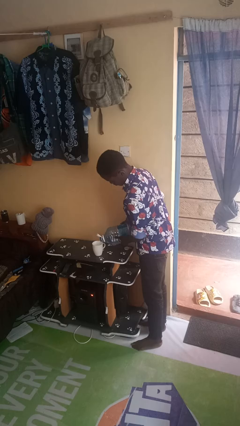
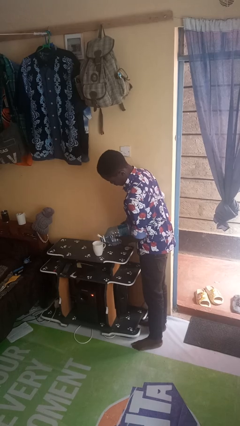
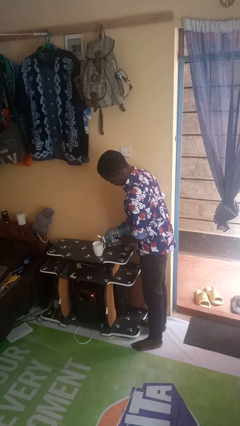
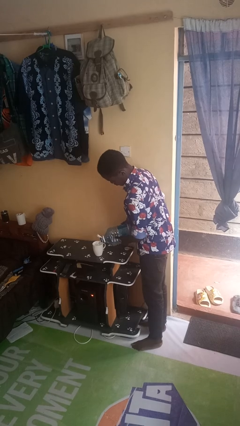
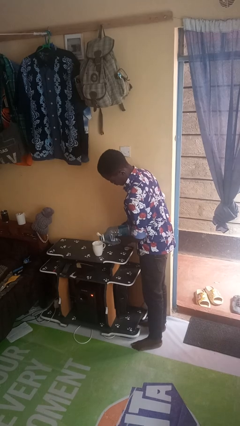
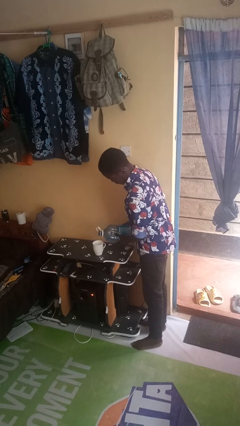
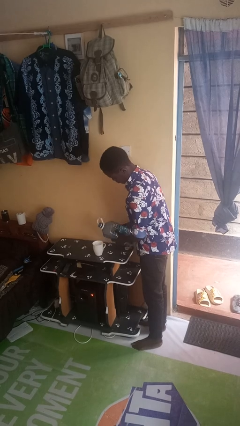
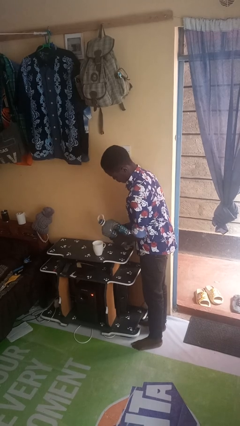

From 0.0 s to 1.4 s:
person pours liquid into cup

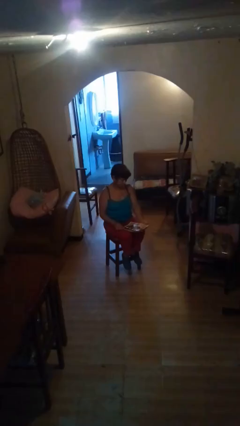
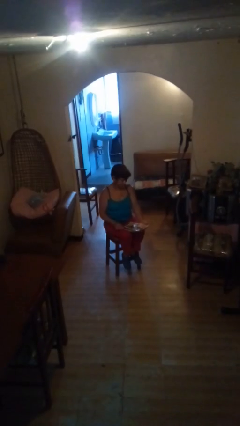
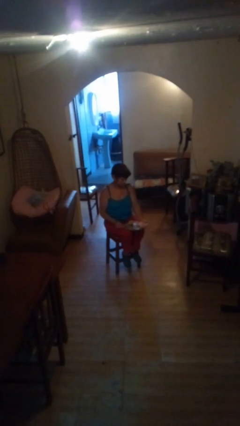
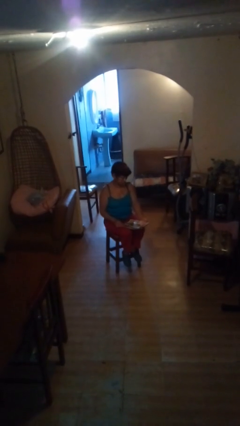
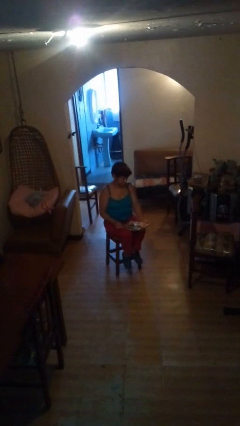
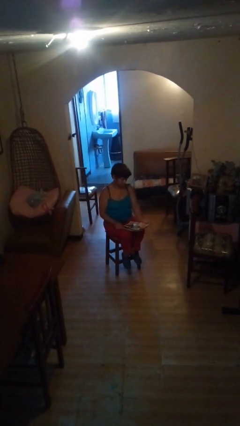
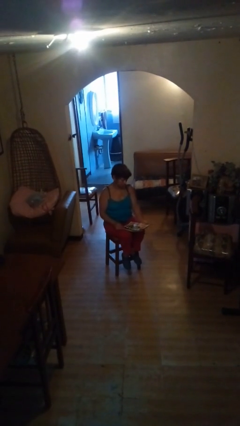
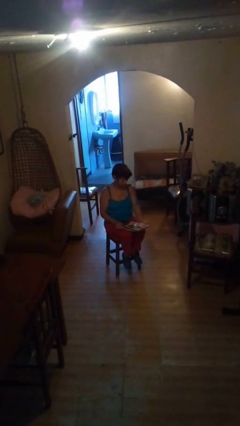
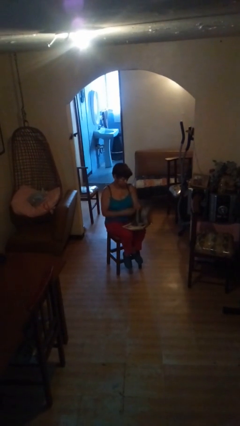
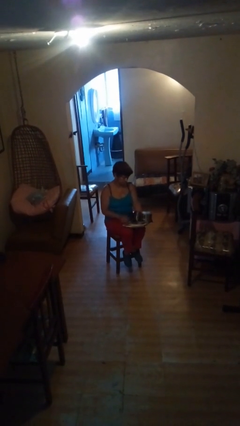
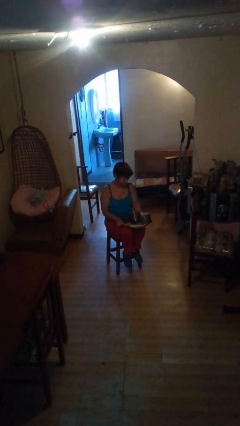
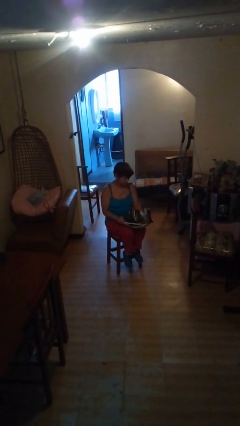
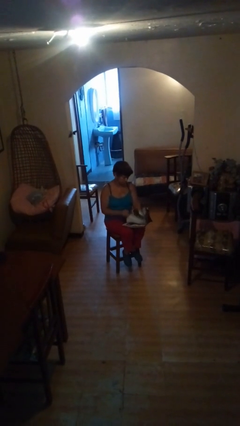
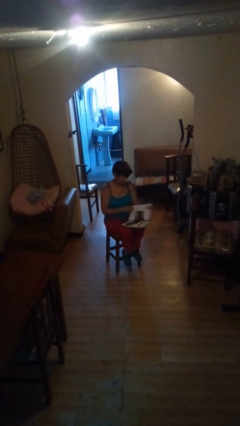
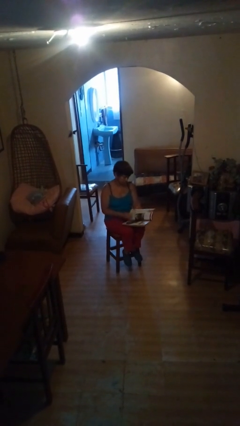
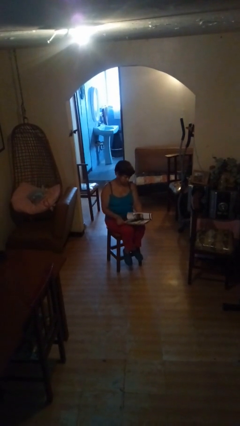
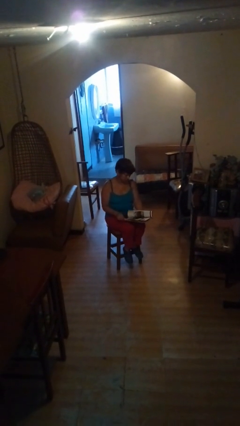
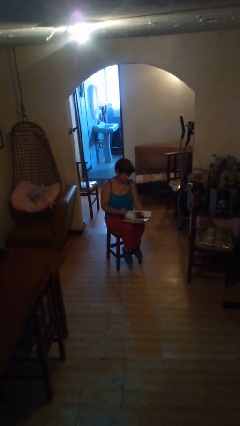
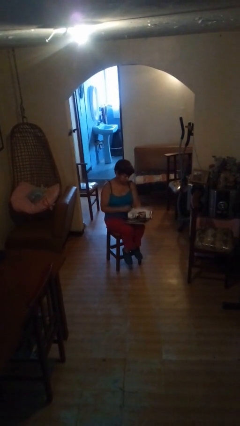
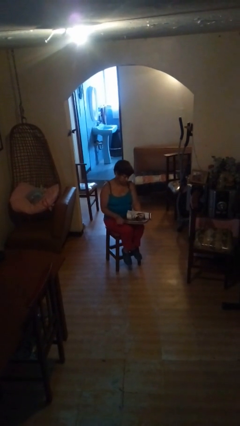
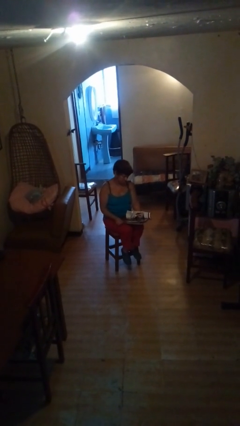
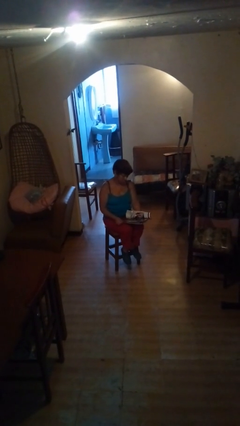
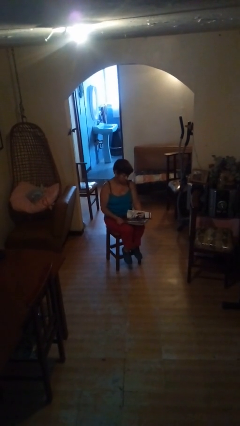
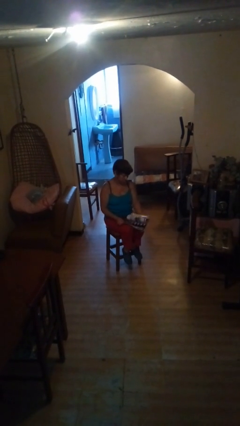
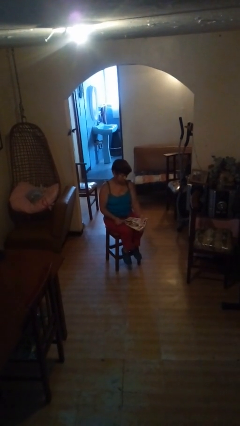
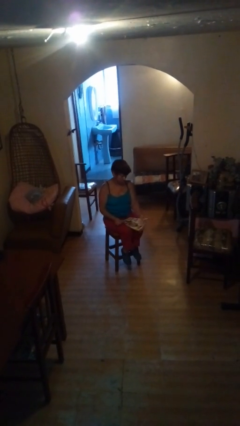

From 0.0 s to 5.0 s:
person reads magazine

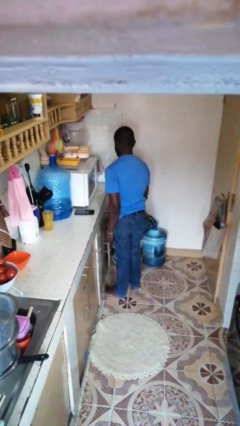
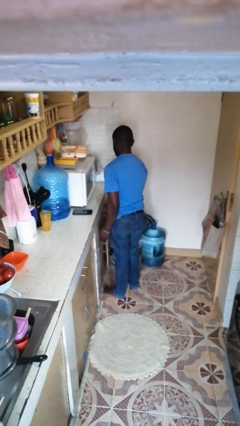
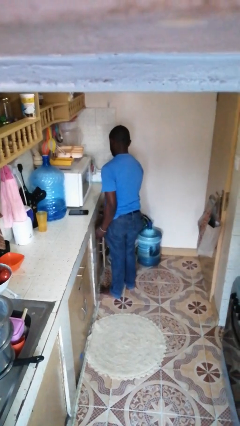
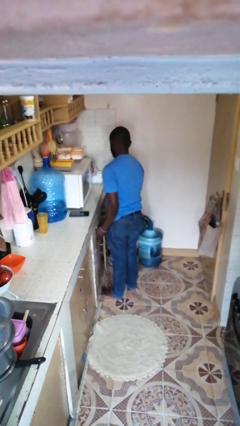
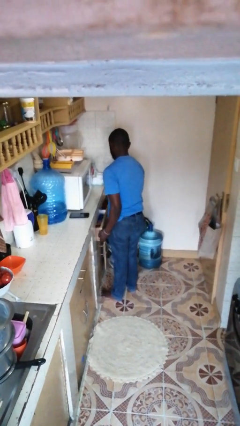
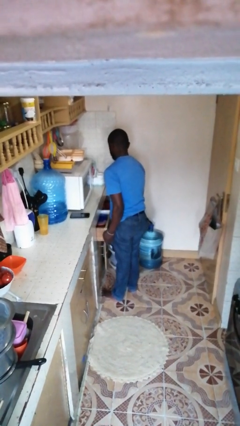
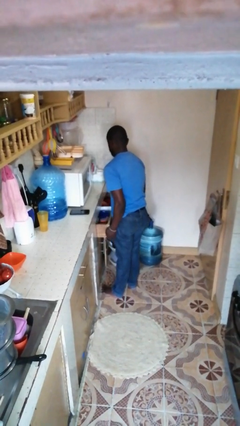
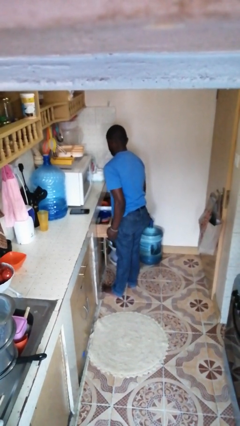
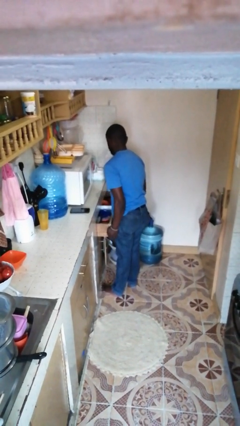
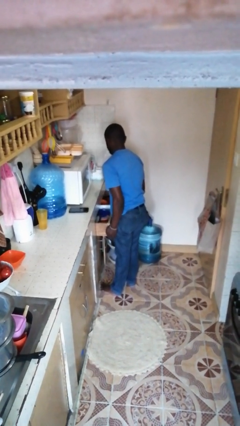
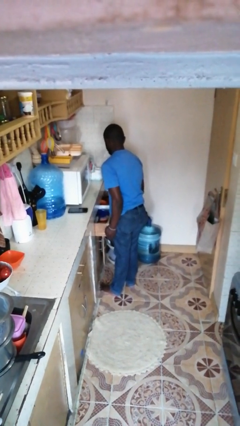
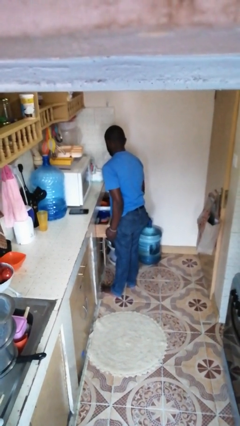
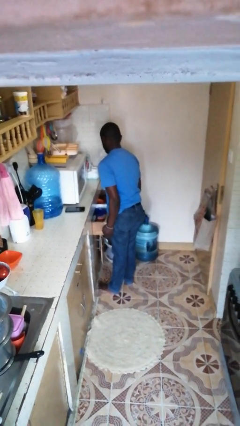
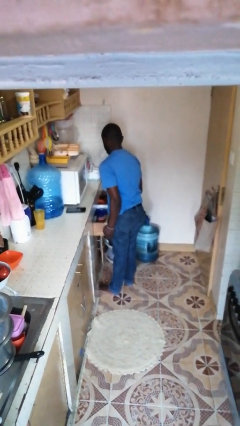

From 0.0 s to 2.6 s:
person opens kitchen drawer

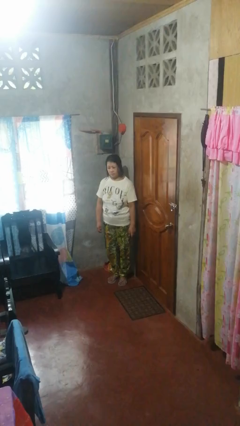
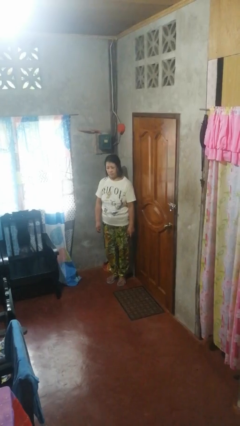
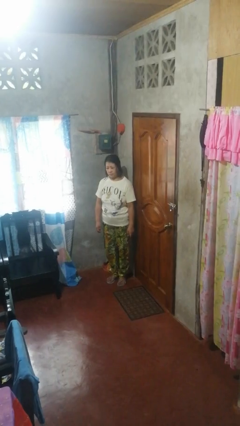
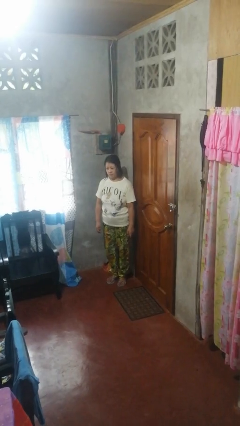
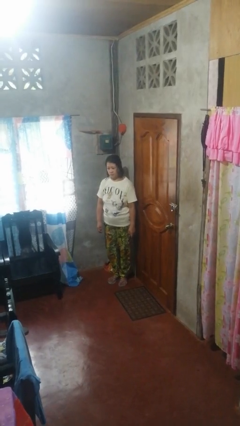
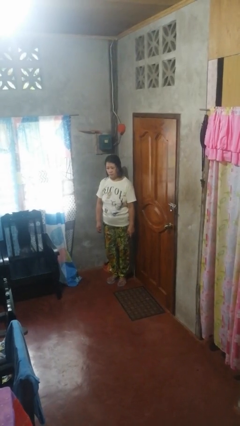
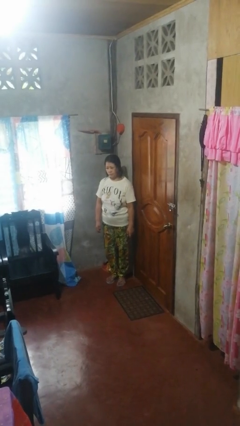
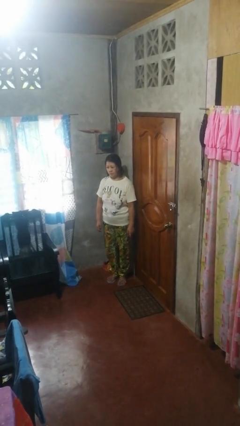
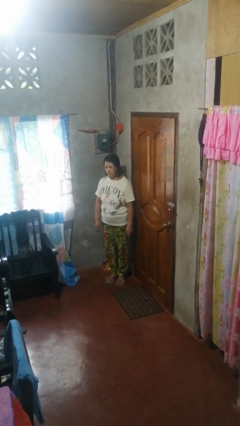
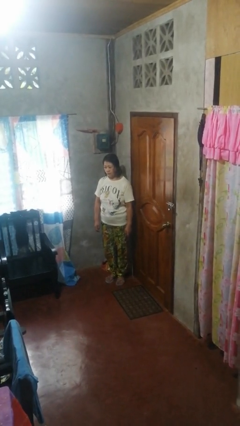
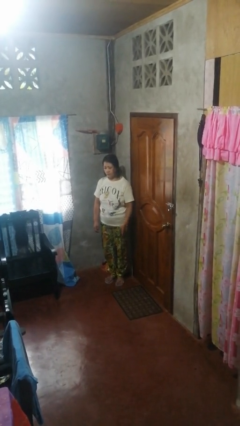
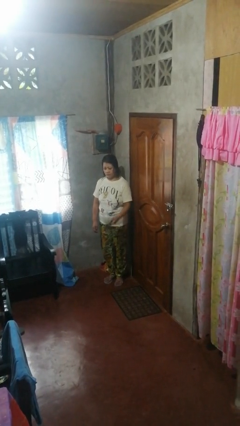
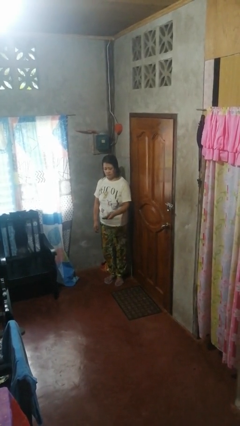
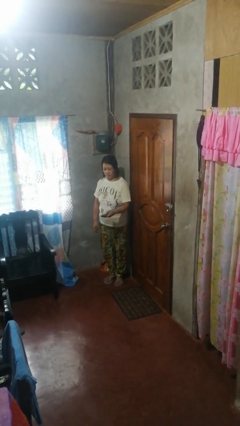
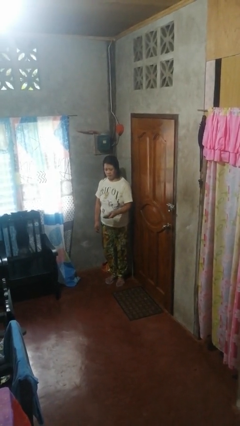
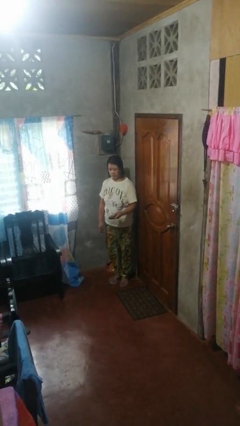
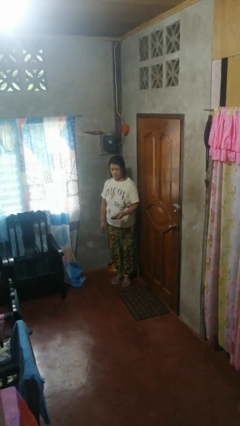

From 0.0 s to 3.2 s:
person uses television remote

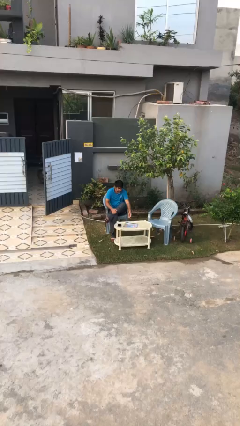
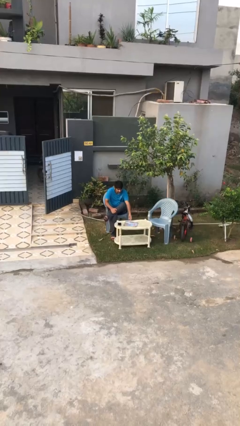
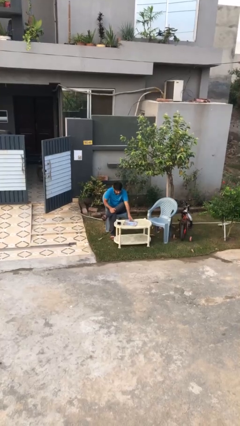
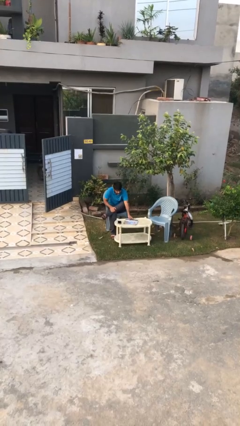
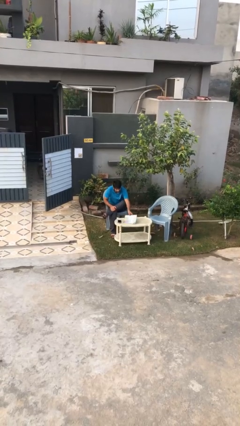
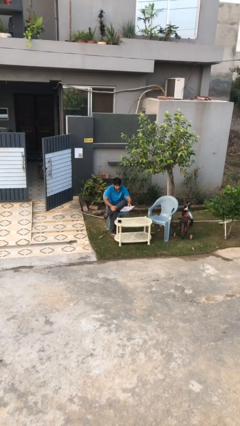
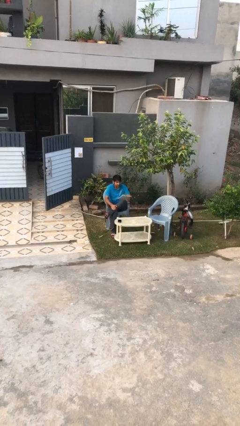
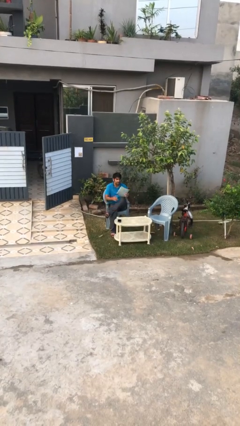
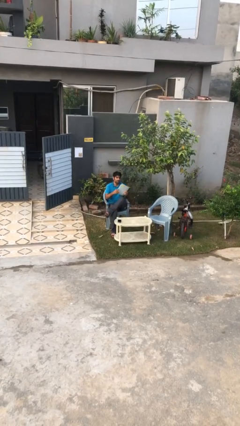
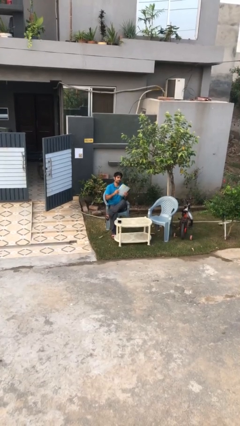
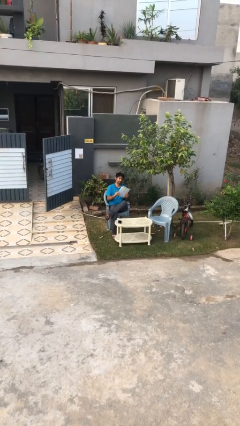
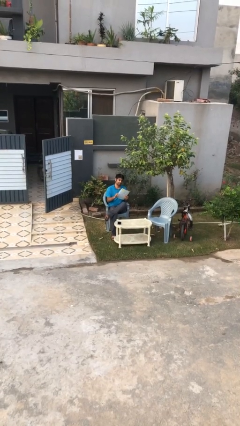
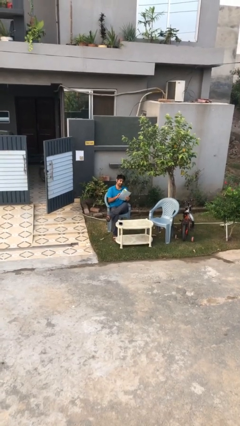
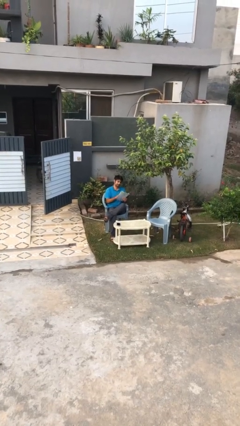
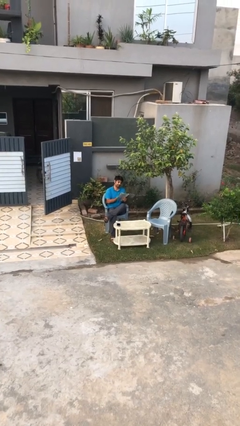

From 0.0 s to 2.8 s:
person picks up object from table

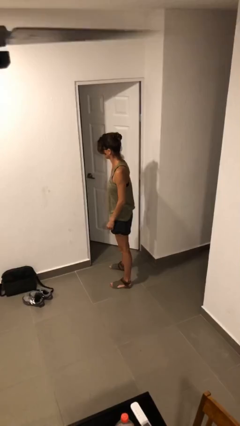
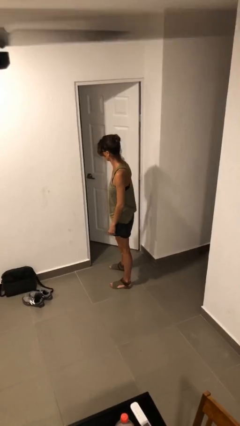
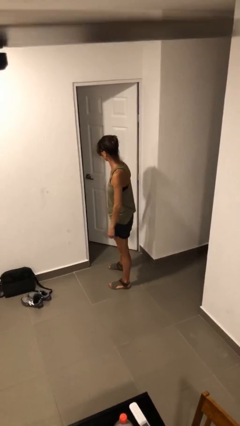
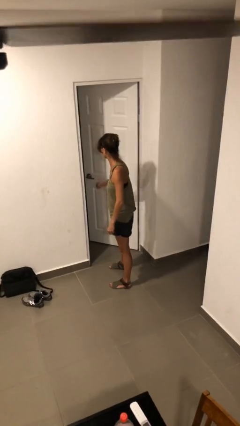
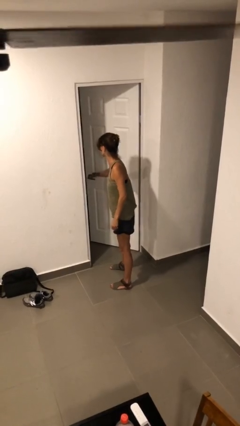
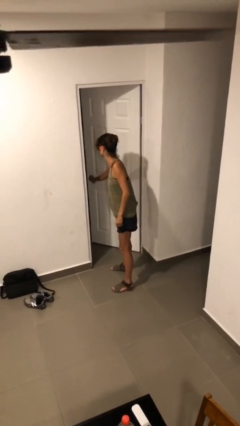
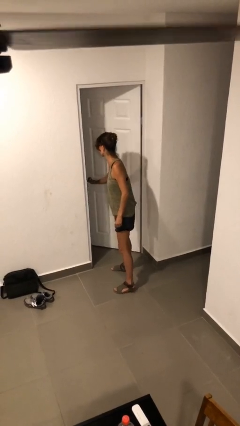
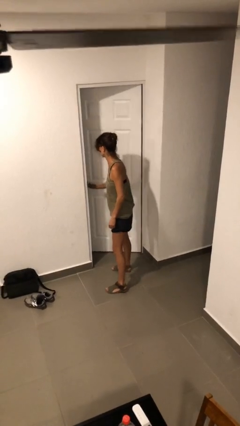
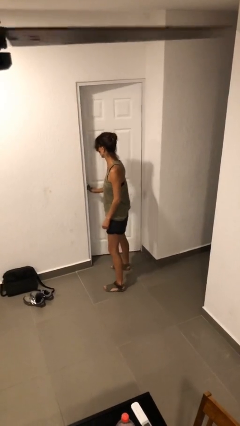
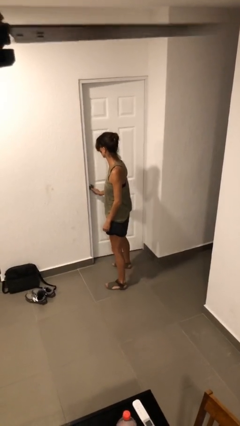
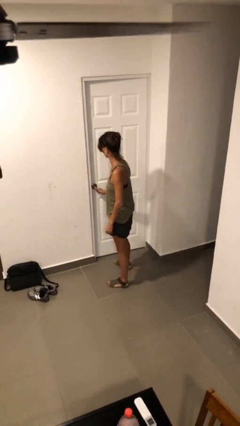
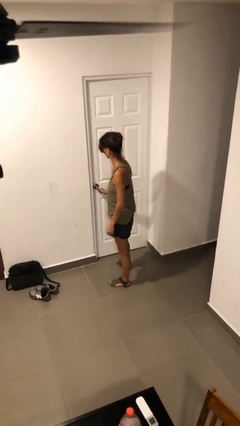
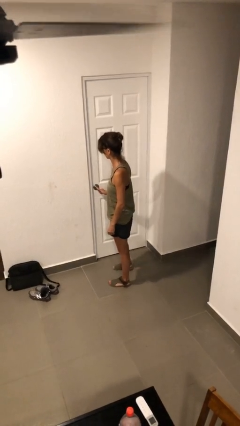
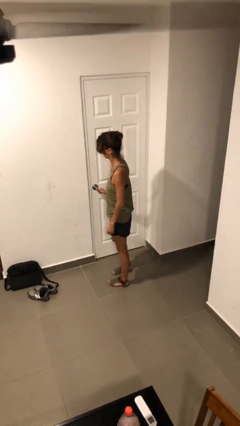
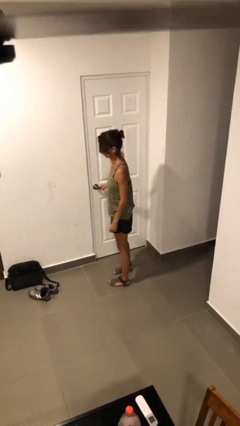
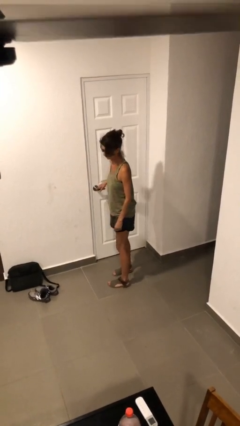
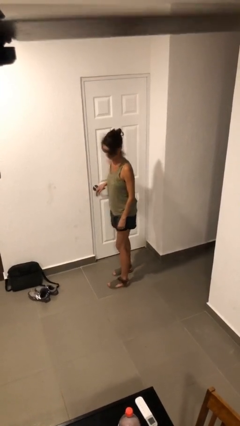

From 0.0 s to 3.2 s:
person closes facility door
